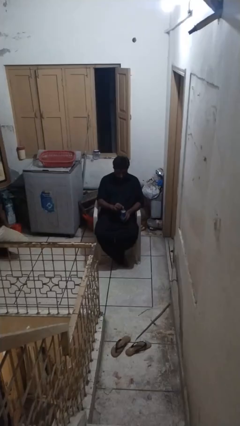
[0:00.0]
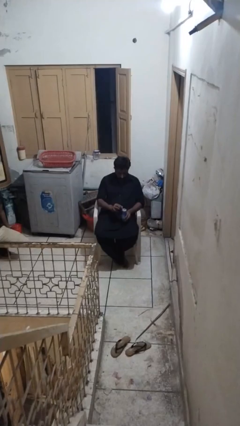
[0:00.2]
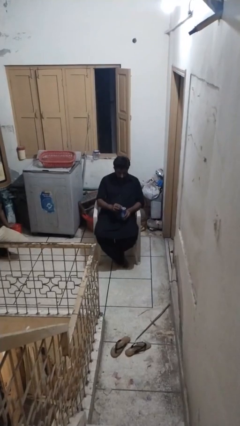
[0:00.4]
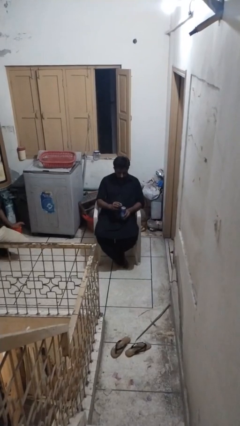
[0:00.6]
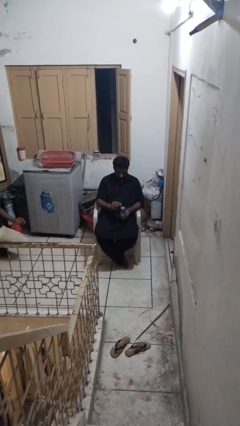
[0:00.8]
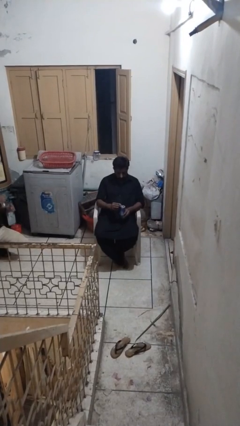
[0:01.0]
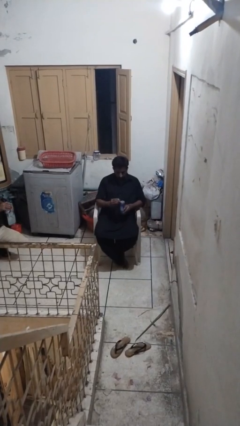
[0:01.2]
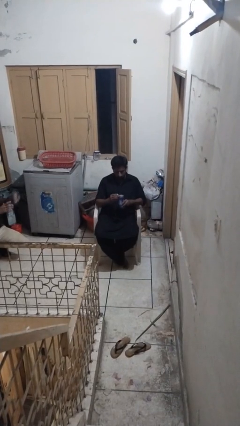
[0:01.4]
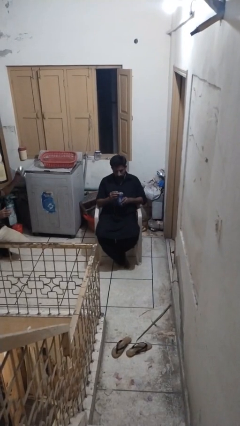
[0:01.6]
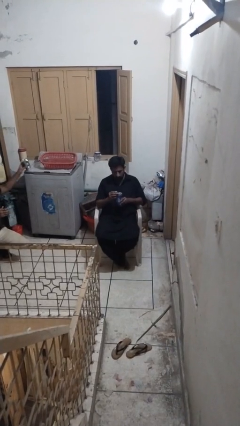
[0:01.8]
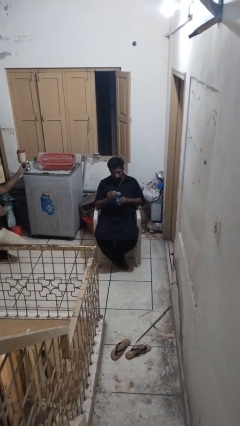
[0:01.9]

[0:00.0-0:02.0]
person opens beverage can

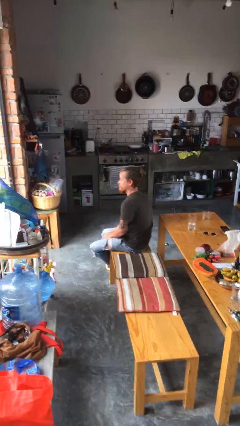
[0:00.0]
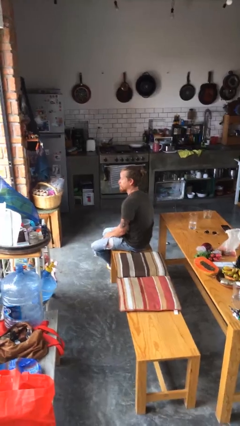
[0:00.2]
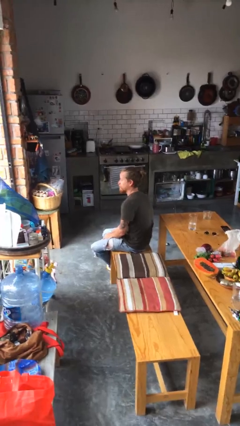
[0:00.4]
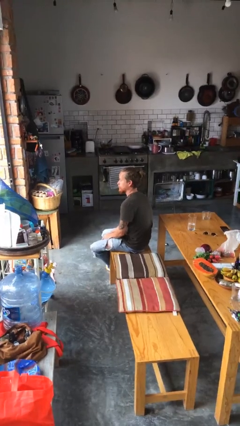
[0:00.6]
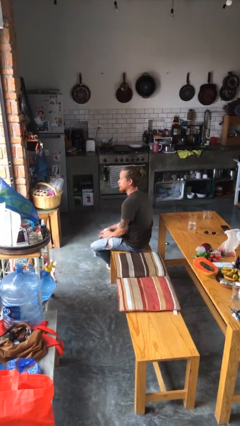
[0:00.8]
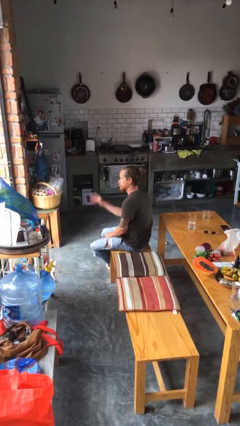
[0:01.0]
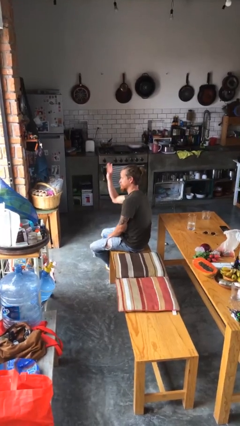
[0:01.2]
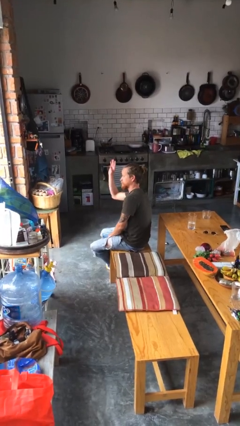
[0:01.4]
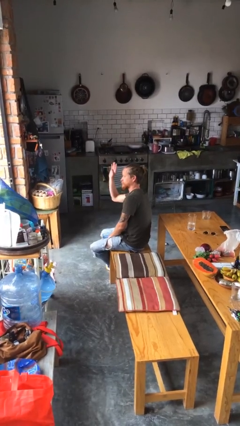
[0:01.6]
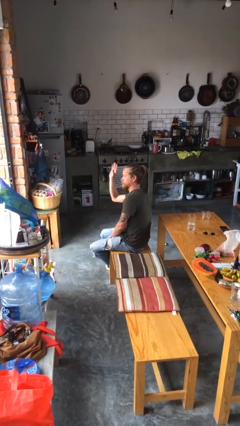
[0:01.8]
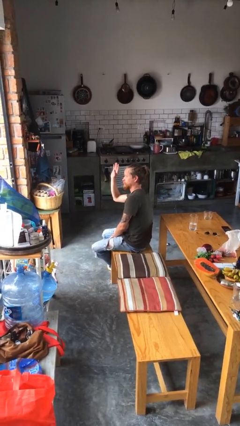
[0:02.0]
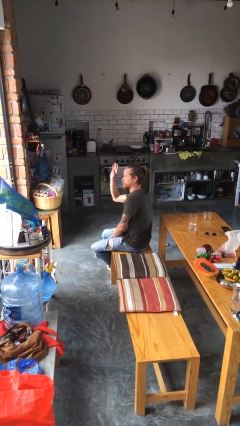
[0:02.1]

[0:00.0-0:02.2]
person gestures raise hand

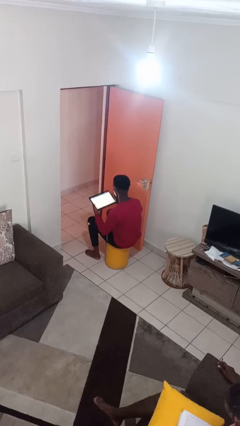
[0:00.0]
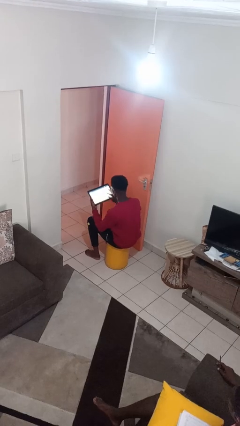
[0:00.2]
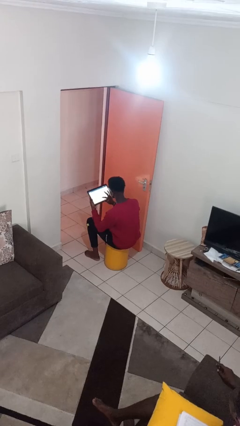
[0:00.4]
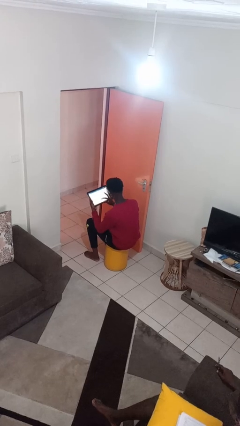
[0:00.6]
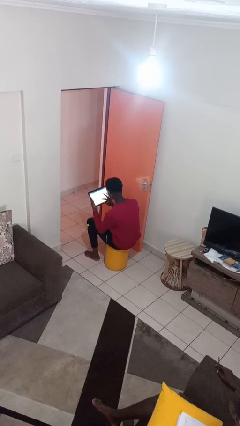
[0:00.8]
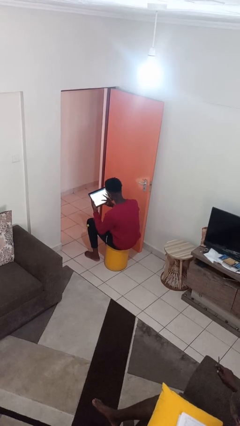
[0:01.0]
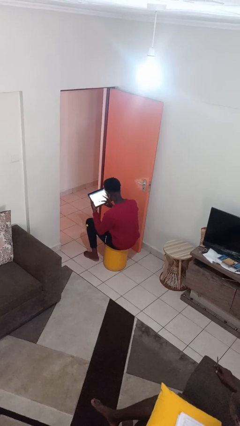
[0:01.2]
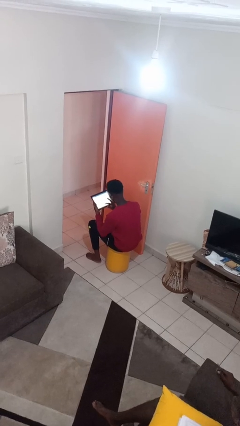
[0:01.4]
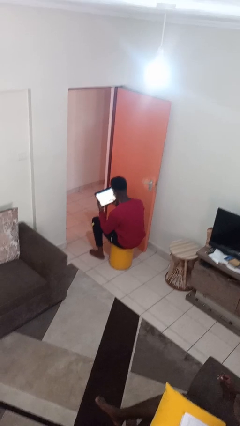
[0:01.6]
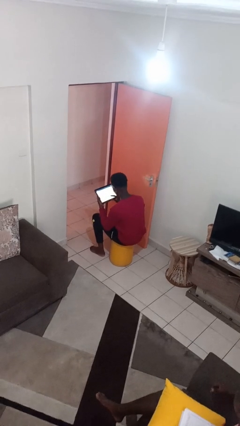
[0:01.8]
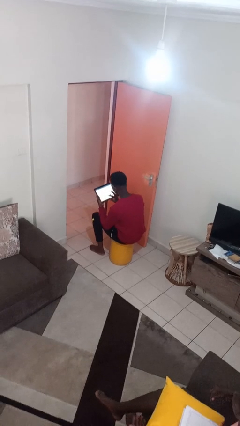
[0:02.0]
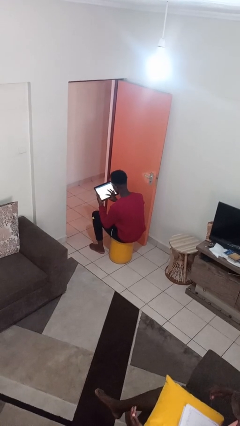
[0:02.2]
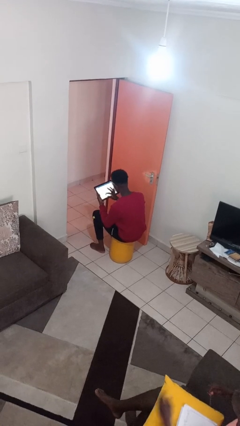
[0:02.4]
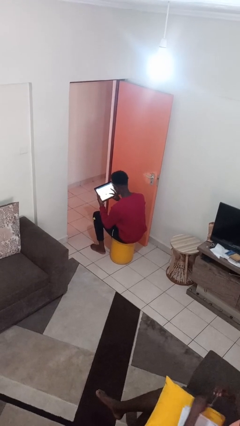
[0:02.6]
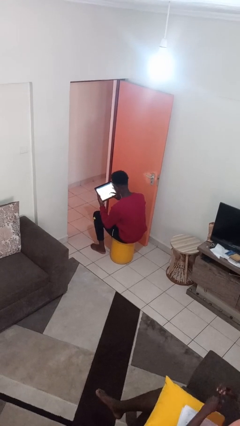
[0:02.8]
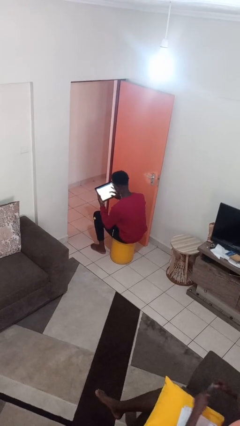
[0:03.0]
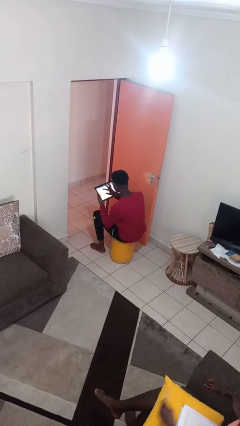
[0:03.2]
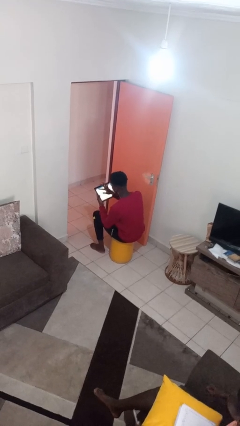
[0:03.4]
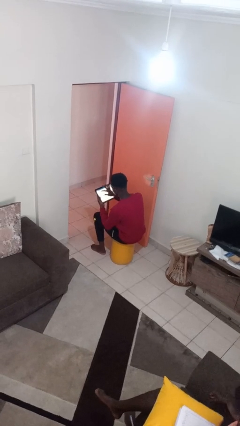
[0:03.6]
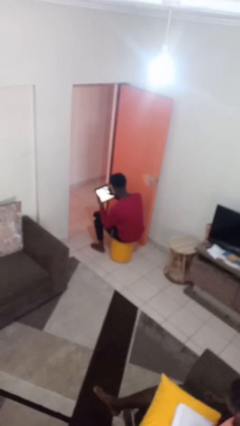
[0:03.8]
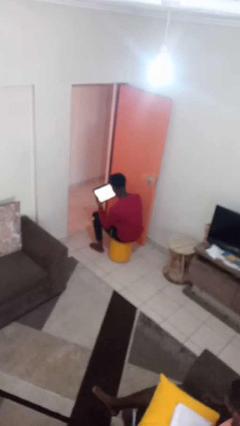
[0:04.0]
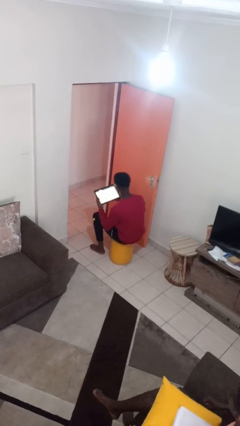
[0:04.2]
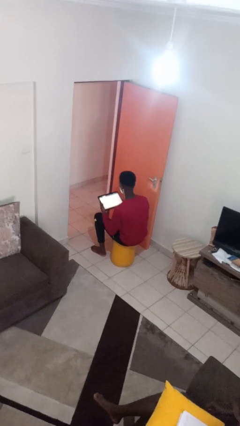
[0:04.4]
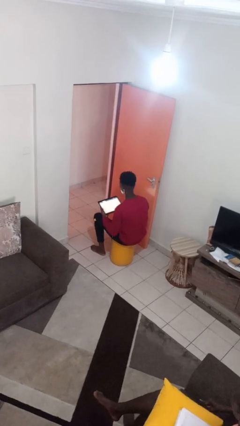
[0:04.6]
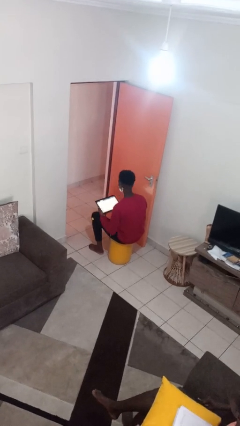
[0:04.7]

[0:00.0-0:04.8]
person interacts with tablet

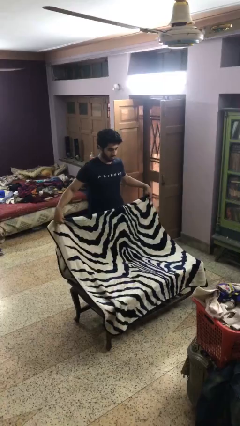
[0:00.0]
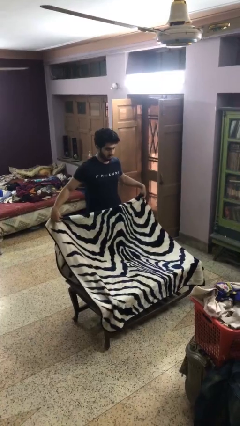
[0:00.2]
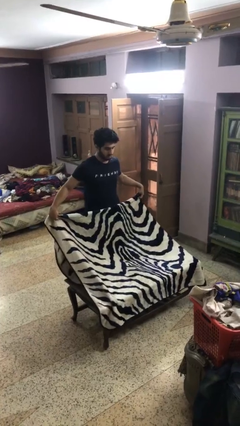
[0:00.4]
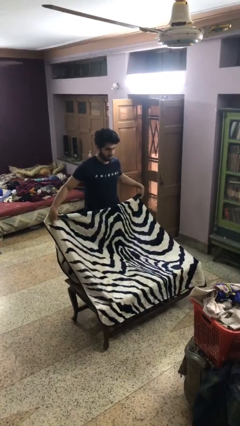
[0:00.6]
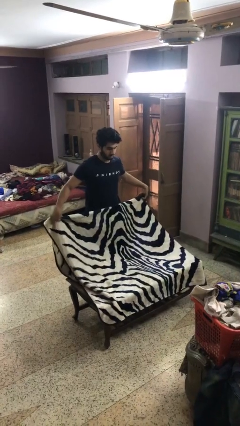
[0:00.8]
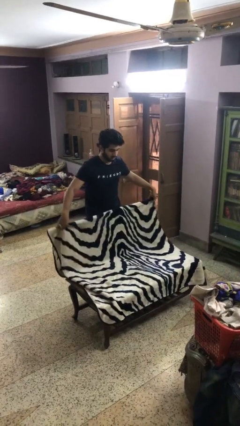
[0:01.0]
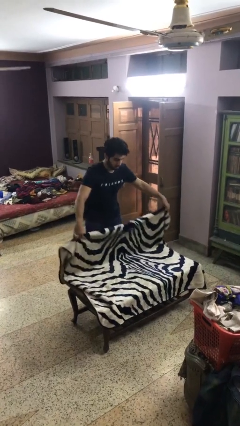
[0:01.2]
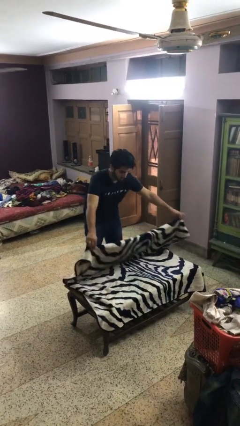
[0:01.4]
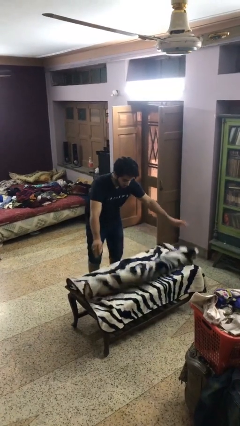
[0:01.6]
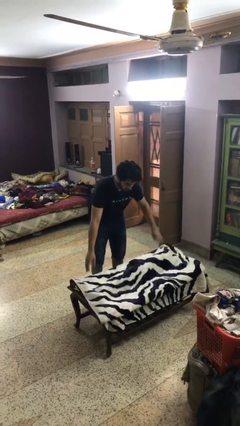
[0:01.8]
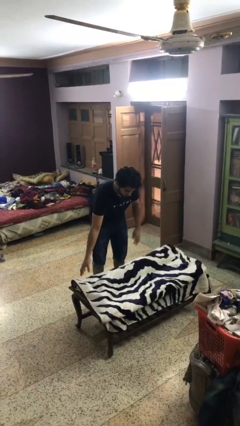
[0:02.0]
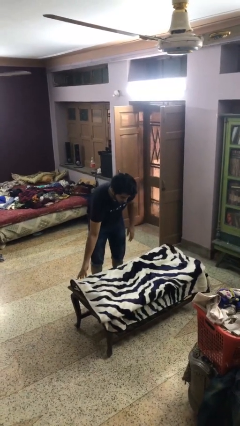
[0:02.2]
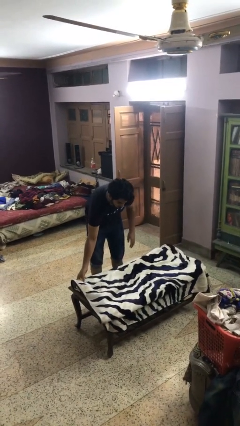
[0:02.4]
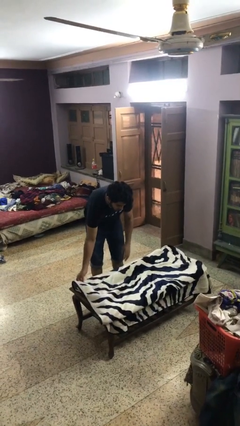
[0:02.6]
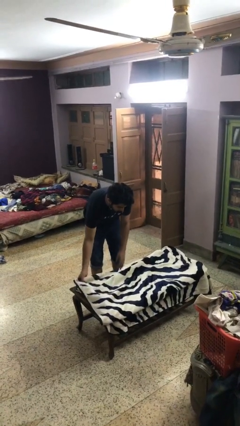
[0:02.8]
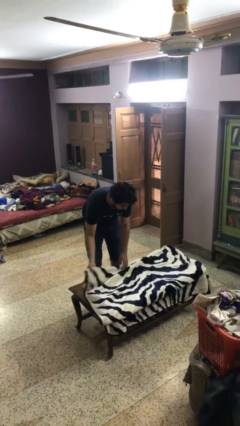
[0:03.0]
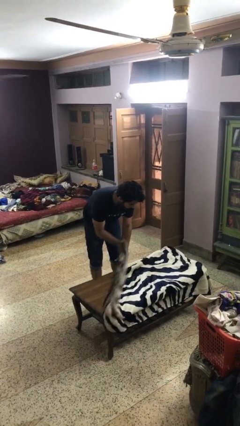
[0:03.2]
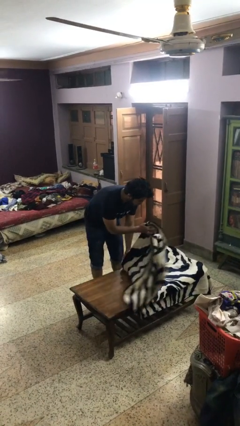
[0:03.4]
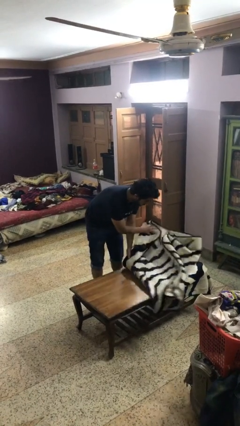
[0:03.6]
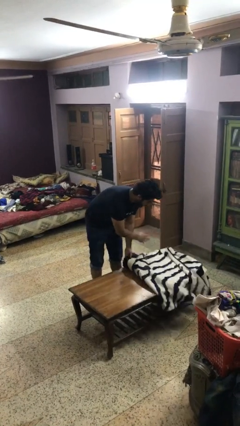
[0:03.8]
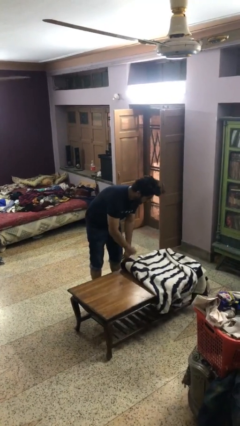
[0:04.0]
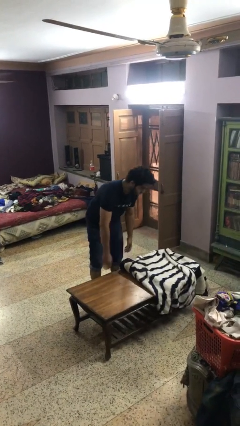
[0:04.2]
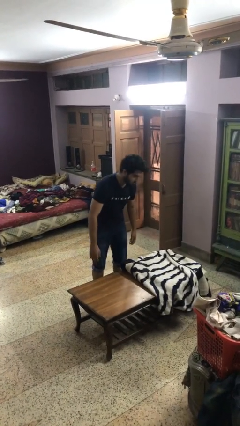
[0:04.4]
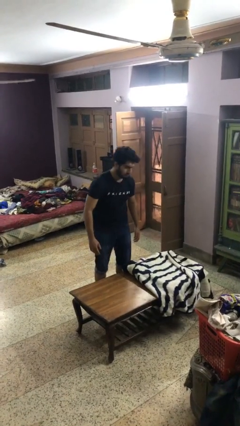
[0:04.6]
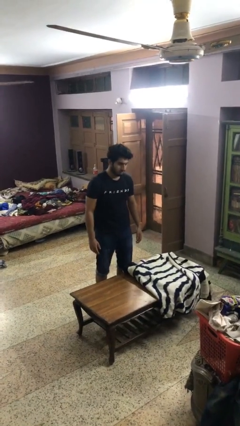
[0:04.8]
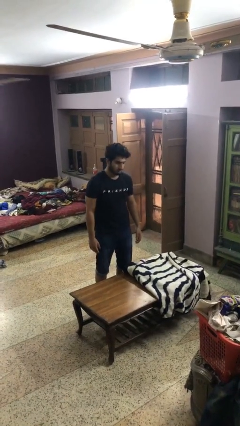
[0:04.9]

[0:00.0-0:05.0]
person folds blanket

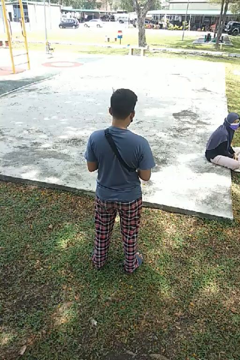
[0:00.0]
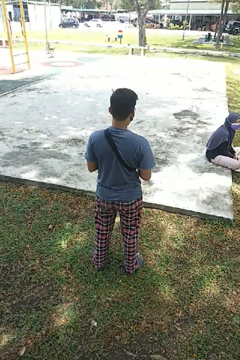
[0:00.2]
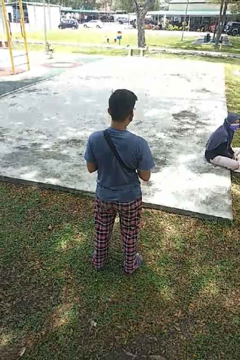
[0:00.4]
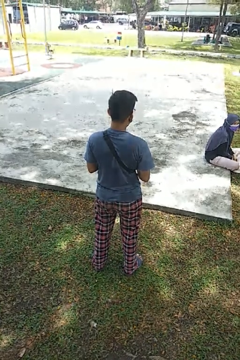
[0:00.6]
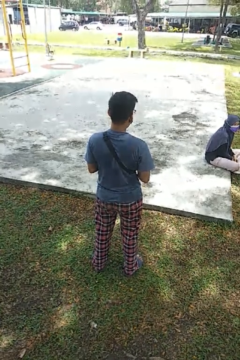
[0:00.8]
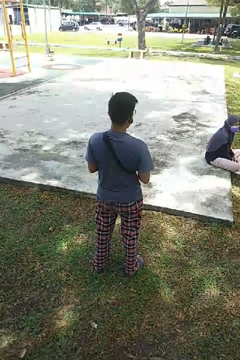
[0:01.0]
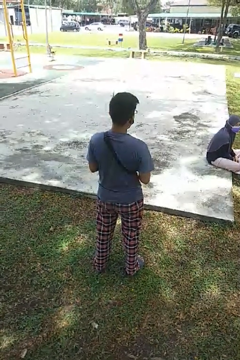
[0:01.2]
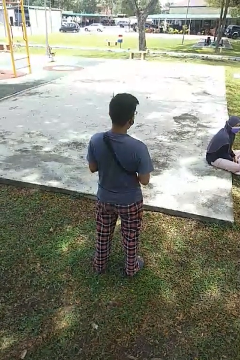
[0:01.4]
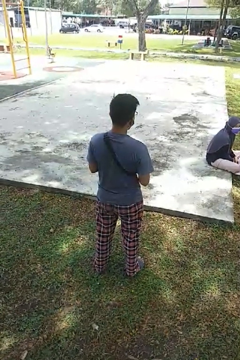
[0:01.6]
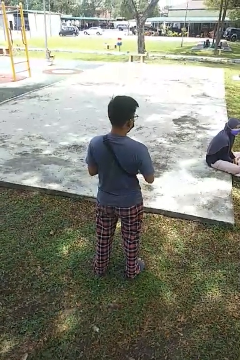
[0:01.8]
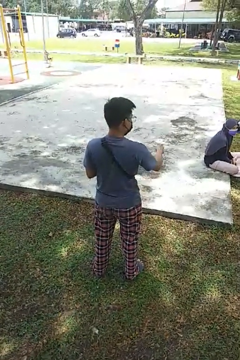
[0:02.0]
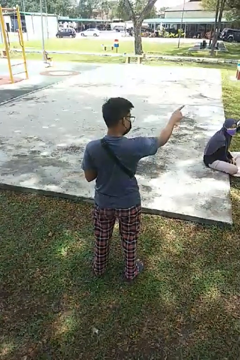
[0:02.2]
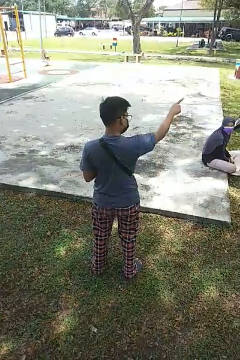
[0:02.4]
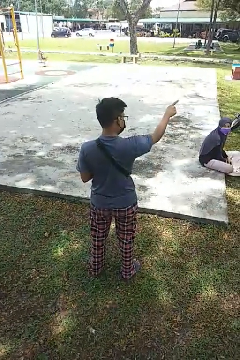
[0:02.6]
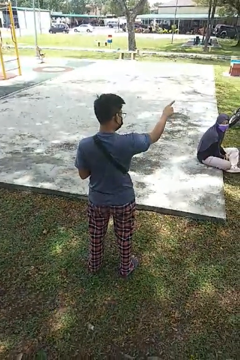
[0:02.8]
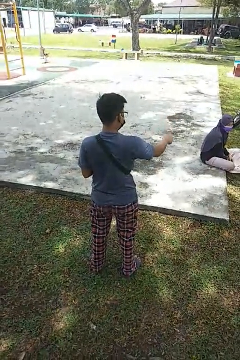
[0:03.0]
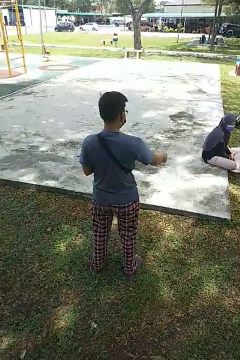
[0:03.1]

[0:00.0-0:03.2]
person points at person

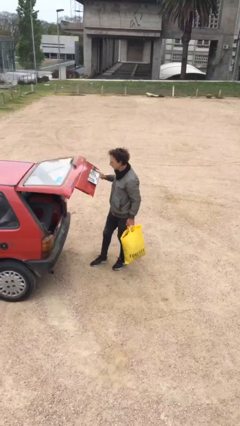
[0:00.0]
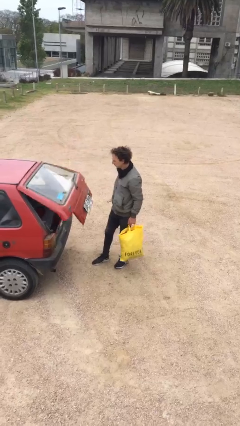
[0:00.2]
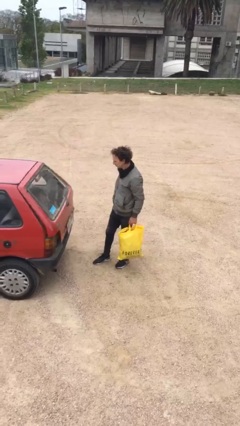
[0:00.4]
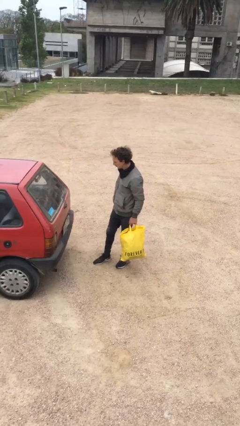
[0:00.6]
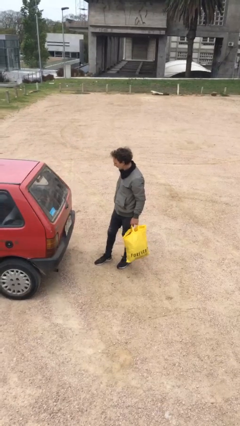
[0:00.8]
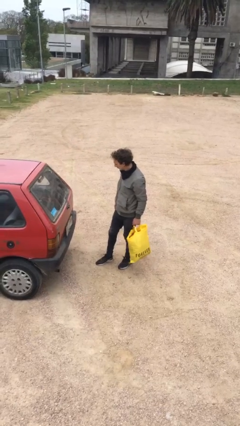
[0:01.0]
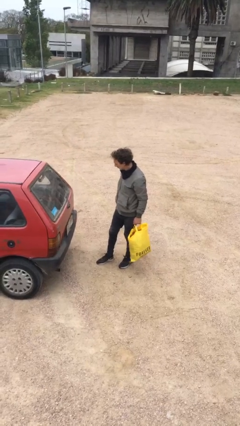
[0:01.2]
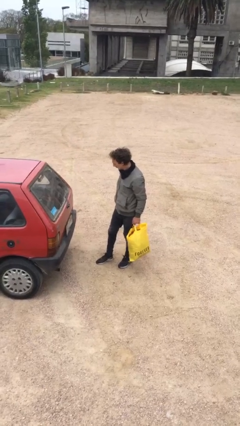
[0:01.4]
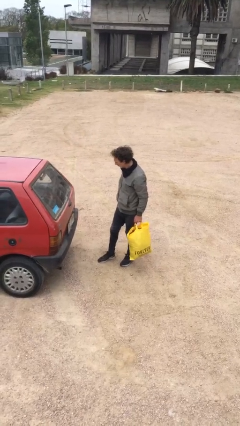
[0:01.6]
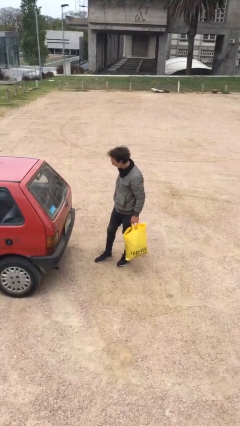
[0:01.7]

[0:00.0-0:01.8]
person closes car trunk
